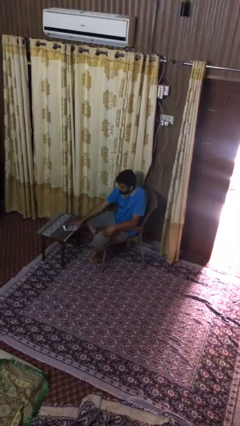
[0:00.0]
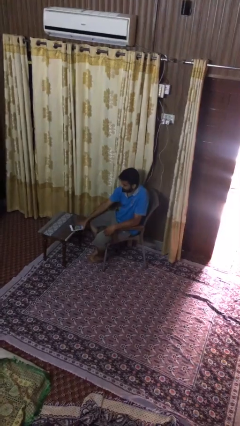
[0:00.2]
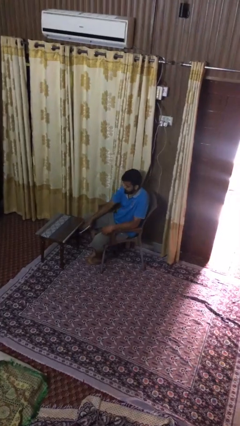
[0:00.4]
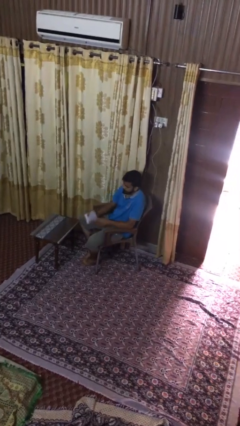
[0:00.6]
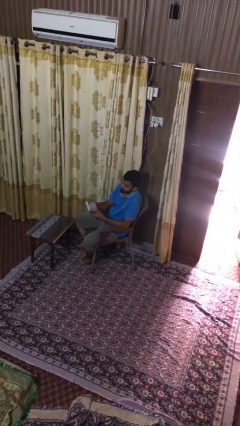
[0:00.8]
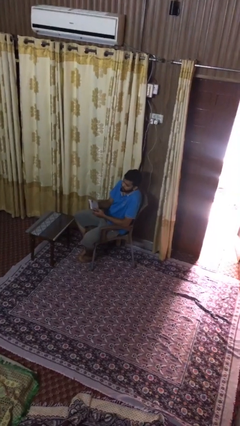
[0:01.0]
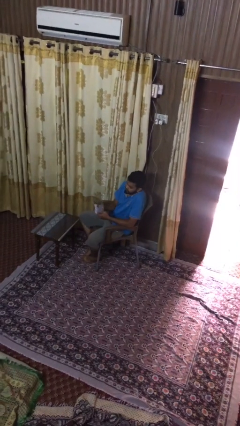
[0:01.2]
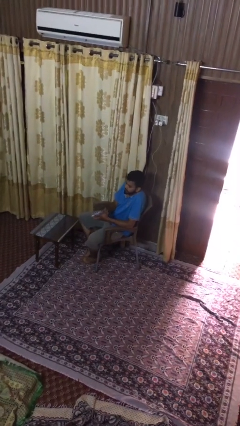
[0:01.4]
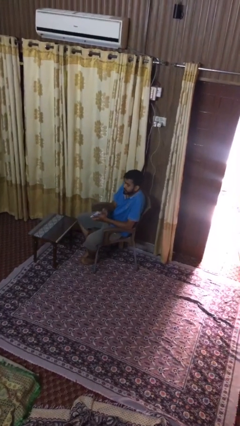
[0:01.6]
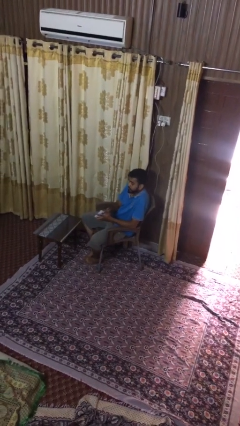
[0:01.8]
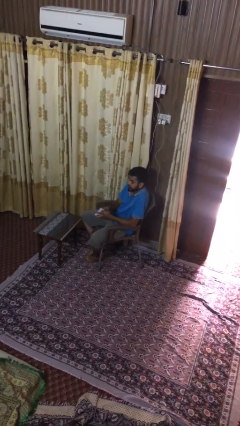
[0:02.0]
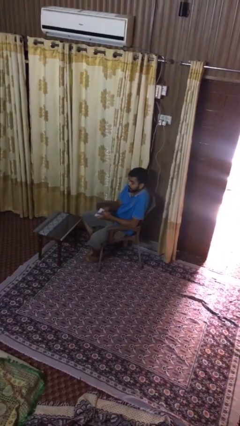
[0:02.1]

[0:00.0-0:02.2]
person picks up object from table

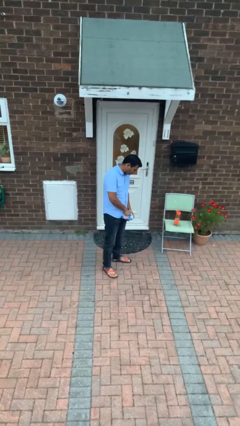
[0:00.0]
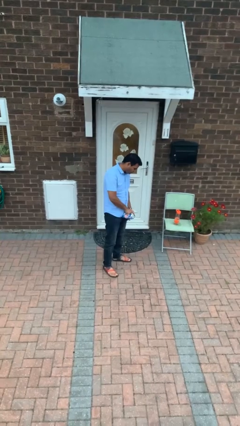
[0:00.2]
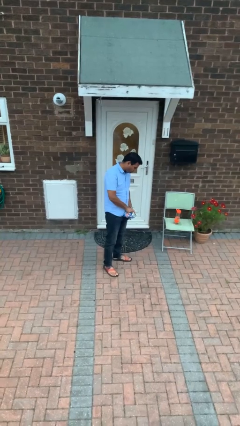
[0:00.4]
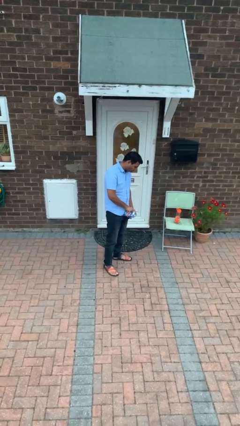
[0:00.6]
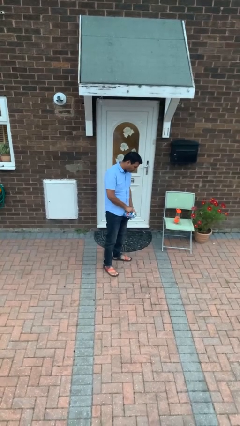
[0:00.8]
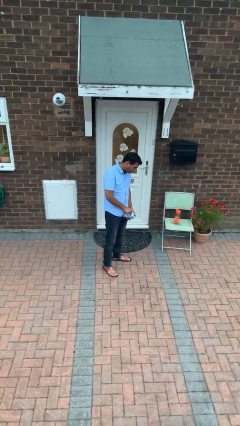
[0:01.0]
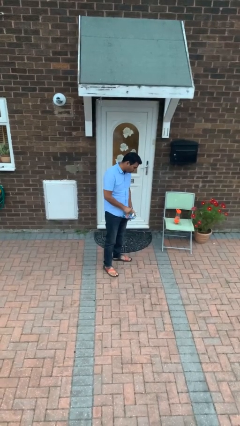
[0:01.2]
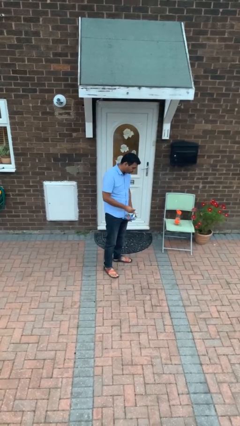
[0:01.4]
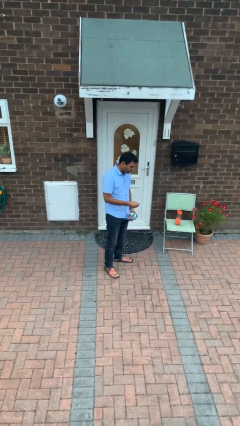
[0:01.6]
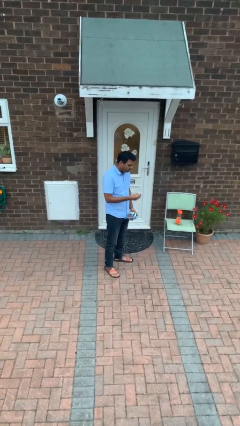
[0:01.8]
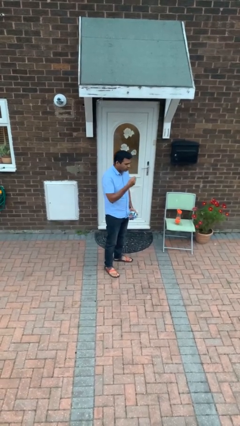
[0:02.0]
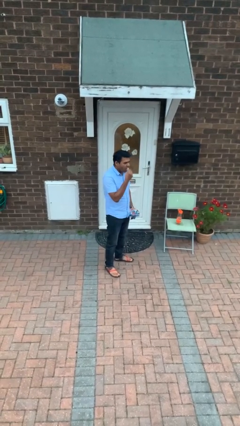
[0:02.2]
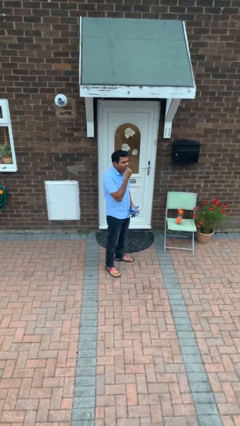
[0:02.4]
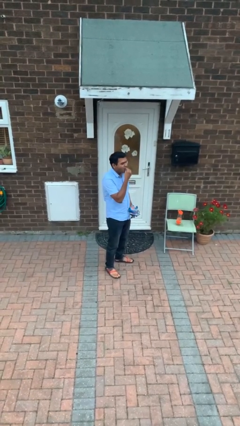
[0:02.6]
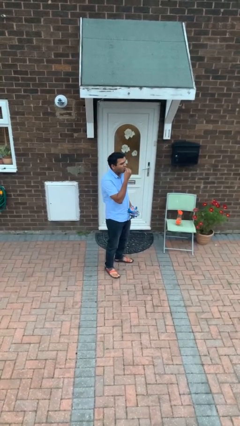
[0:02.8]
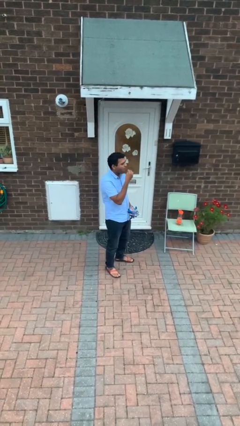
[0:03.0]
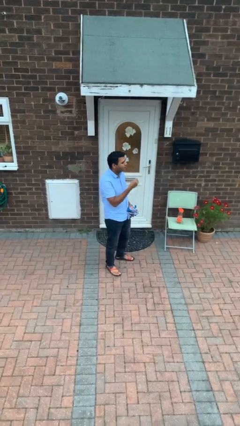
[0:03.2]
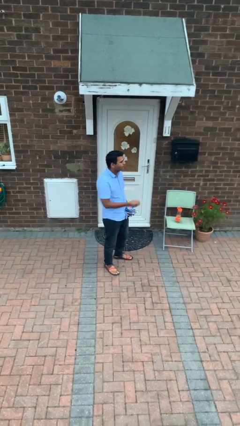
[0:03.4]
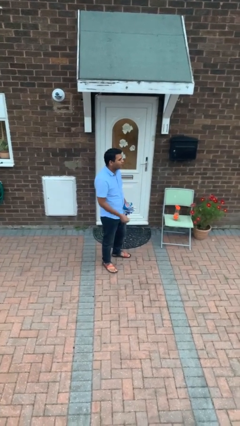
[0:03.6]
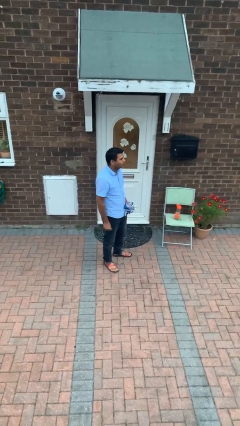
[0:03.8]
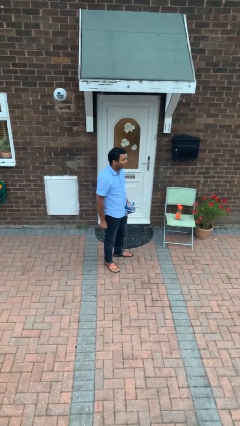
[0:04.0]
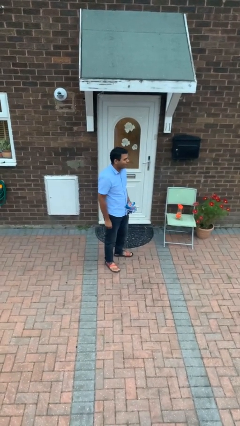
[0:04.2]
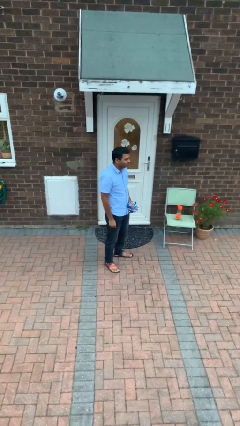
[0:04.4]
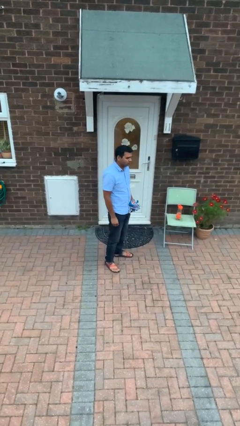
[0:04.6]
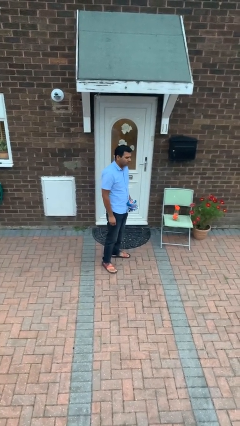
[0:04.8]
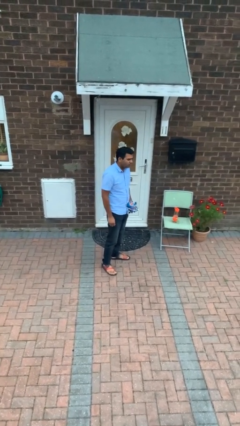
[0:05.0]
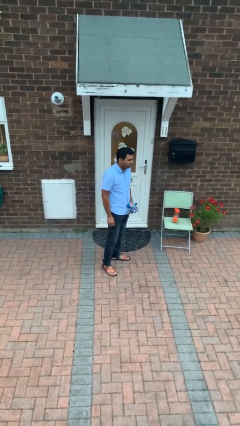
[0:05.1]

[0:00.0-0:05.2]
person eats snack from bag

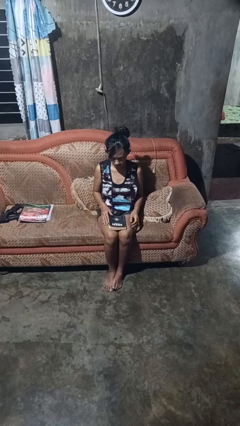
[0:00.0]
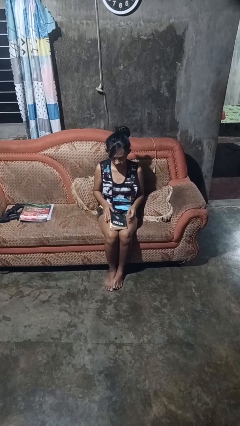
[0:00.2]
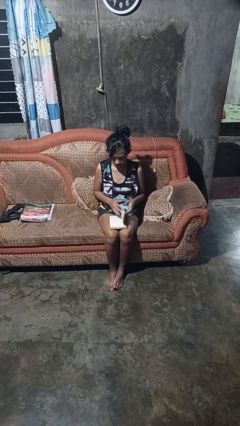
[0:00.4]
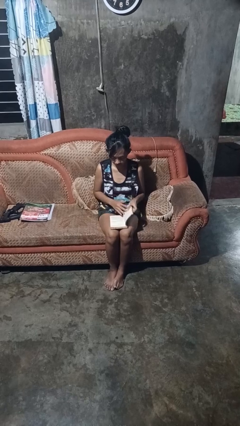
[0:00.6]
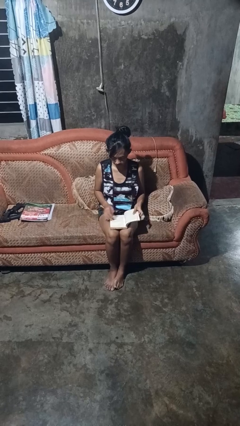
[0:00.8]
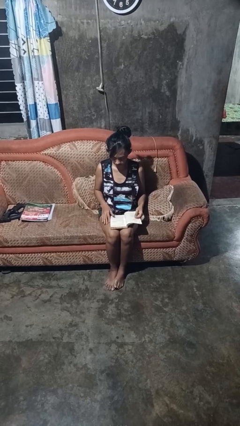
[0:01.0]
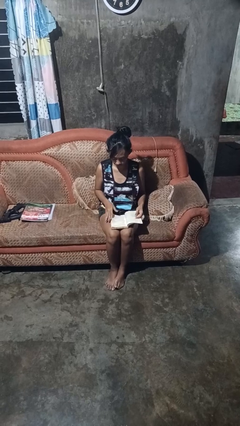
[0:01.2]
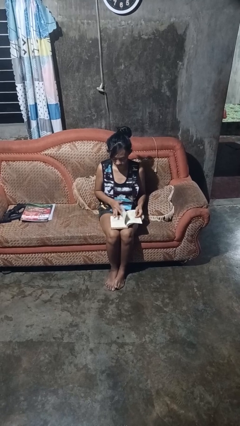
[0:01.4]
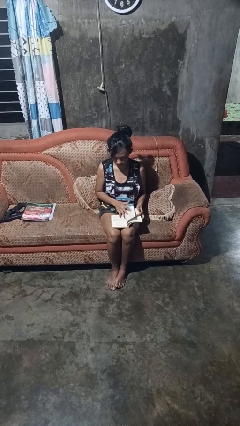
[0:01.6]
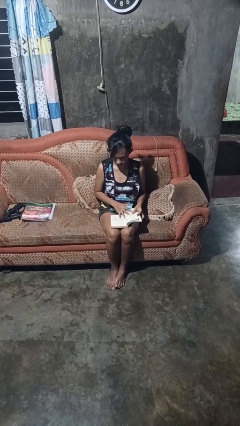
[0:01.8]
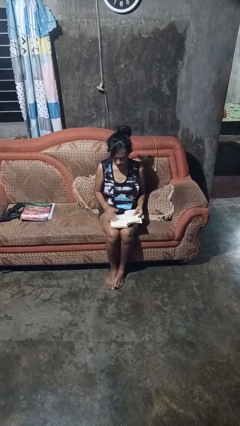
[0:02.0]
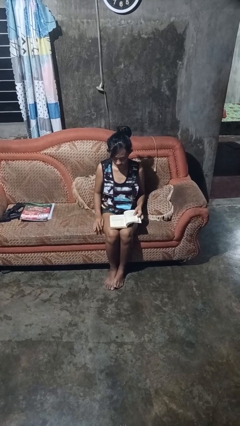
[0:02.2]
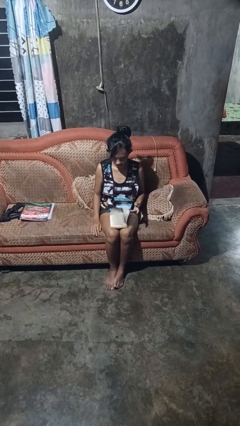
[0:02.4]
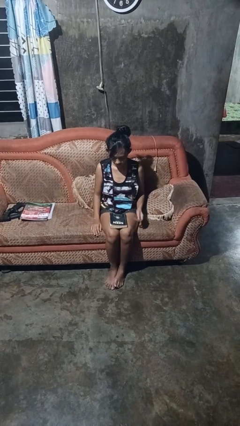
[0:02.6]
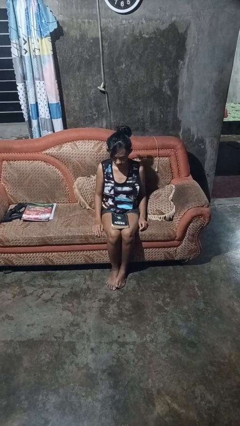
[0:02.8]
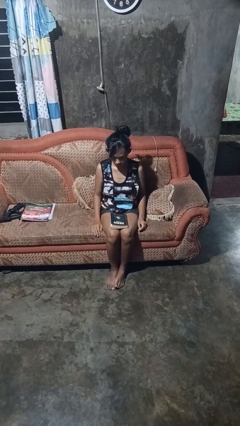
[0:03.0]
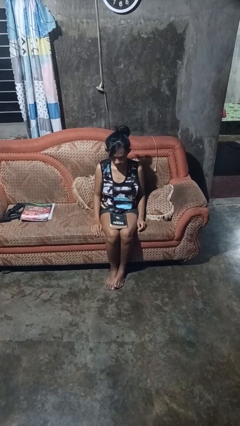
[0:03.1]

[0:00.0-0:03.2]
person reads book

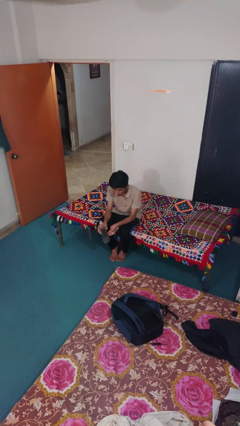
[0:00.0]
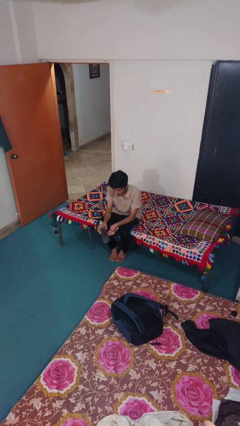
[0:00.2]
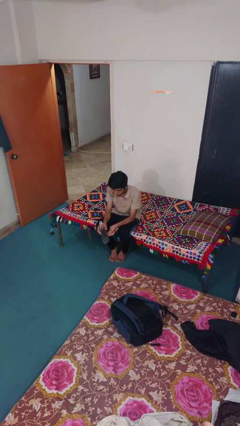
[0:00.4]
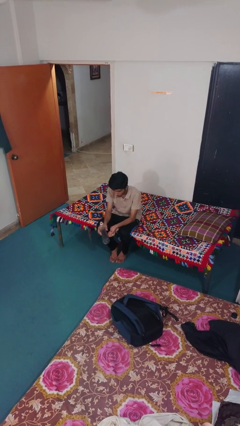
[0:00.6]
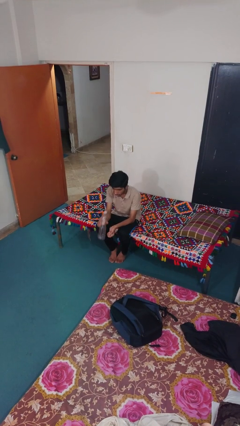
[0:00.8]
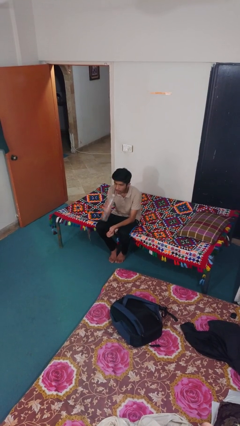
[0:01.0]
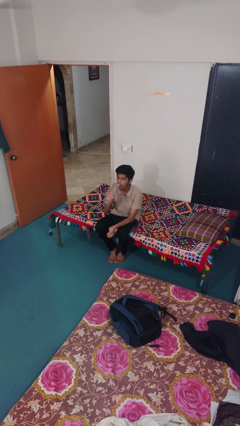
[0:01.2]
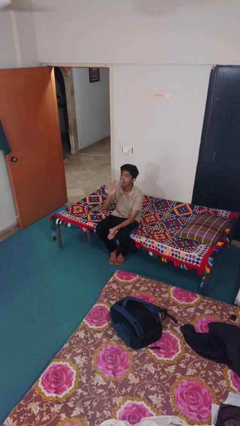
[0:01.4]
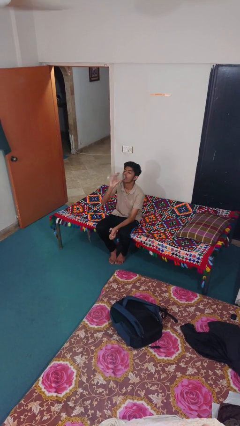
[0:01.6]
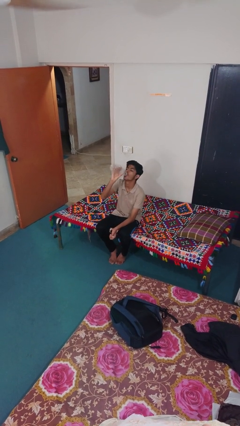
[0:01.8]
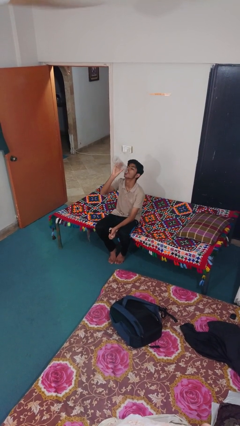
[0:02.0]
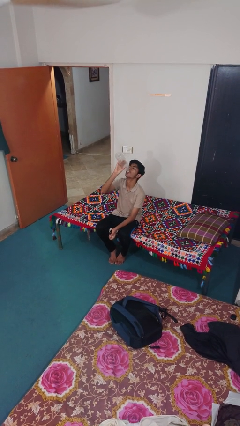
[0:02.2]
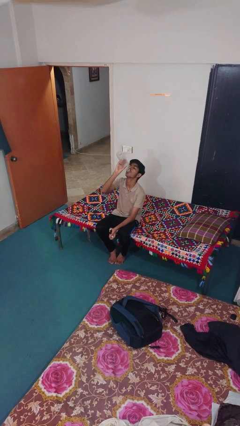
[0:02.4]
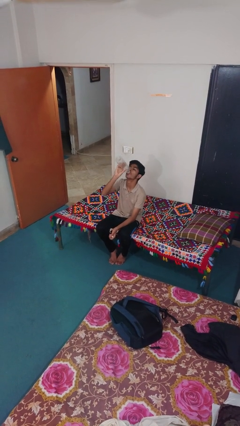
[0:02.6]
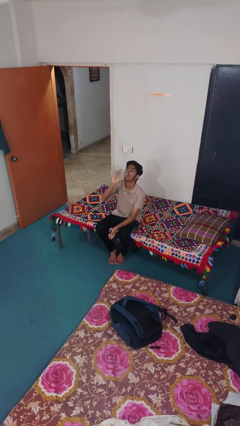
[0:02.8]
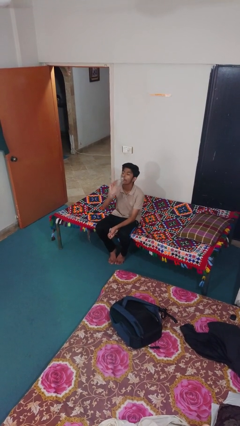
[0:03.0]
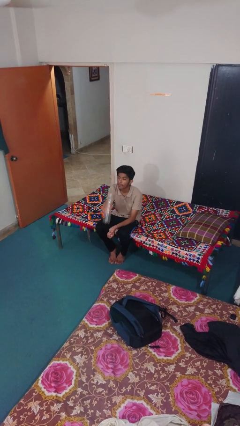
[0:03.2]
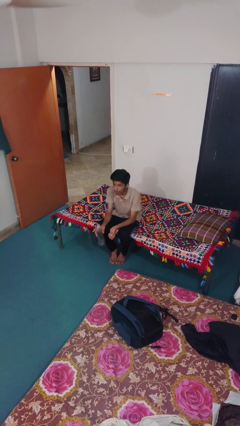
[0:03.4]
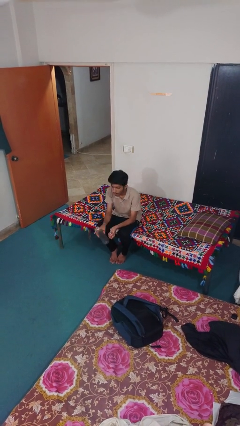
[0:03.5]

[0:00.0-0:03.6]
person drinks from bottle

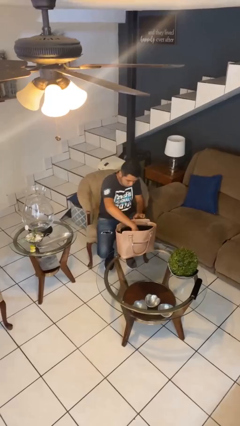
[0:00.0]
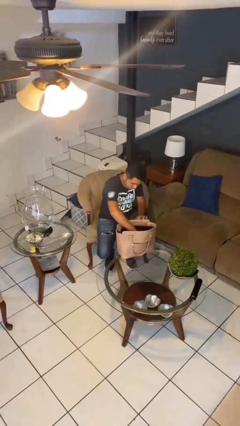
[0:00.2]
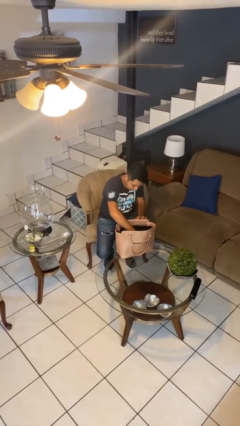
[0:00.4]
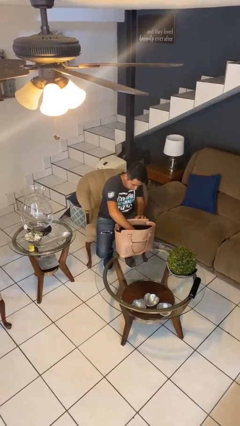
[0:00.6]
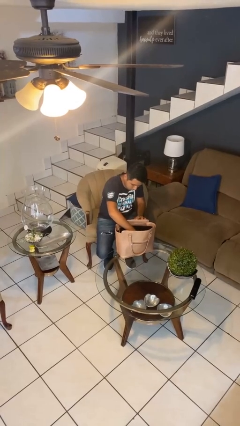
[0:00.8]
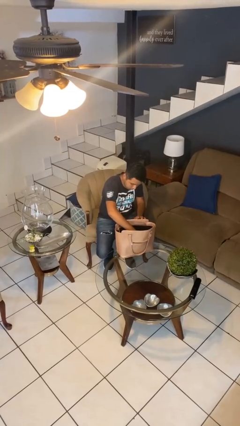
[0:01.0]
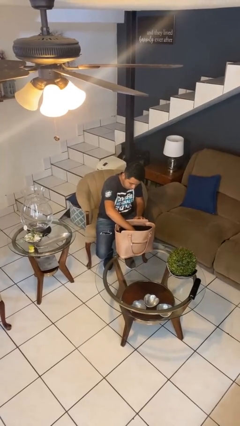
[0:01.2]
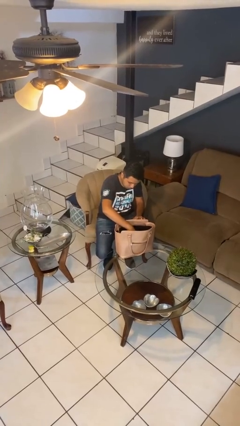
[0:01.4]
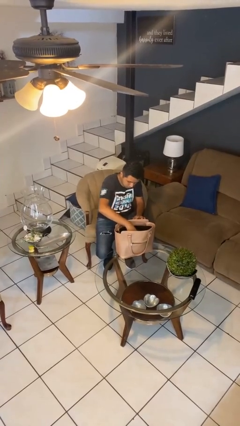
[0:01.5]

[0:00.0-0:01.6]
person searches in purse

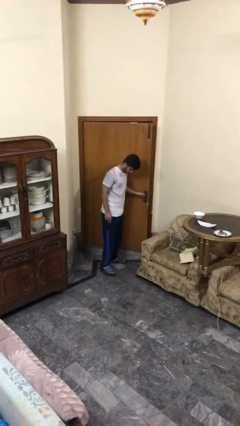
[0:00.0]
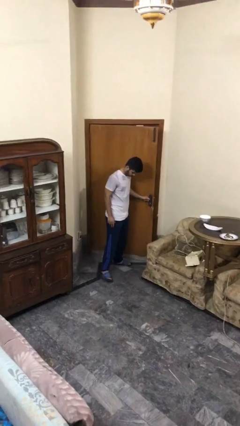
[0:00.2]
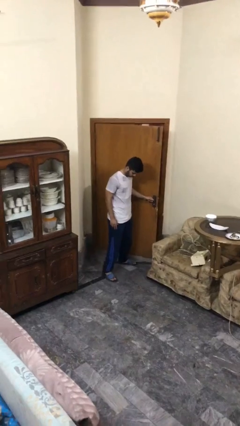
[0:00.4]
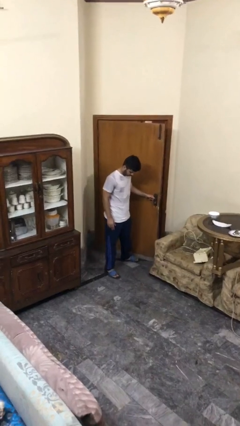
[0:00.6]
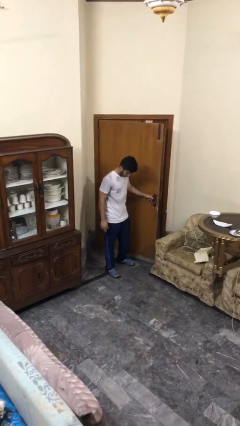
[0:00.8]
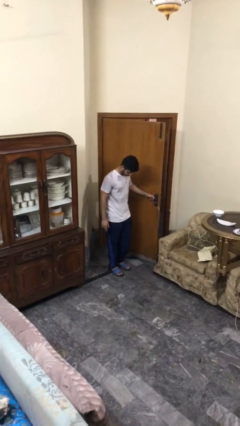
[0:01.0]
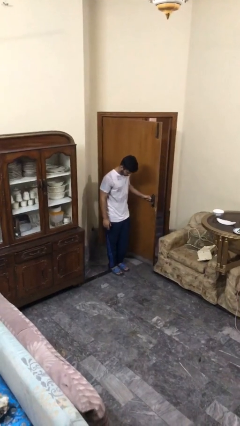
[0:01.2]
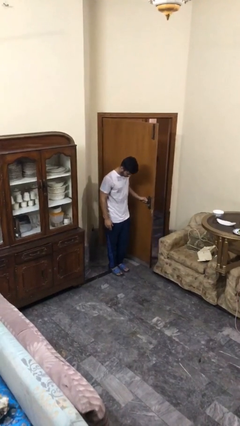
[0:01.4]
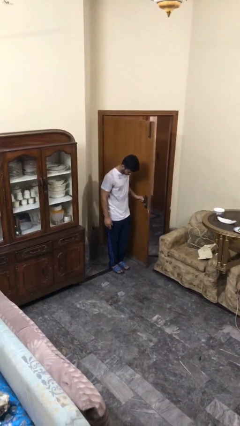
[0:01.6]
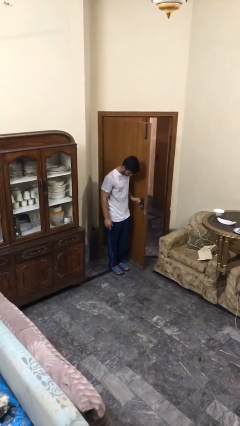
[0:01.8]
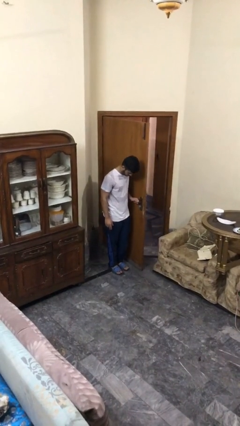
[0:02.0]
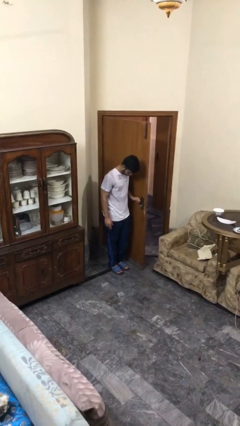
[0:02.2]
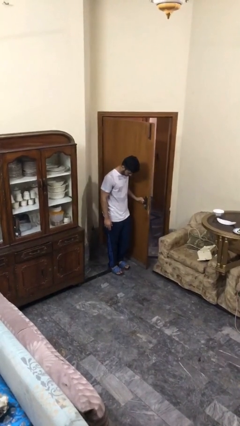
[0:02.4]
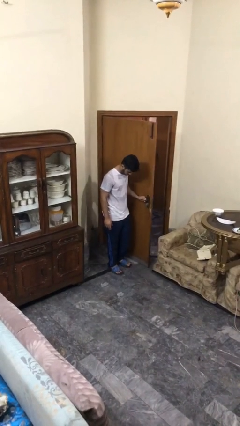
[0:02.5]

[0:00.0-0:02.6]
person opens facility door
